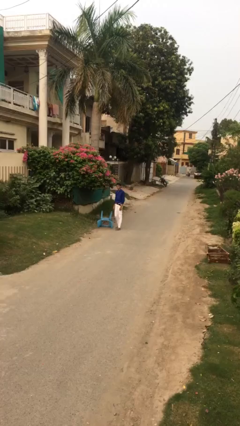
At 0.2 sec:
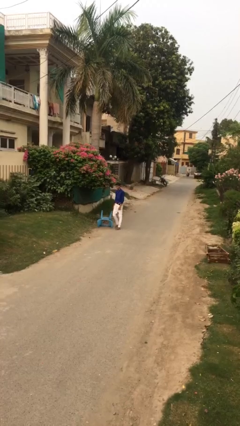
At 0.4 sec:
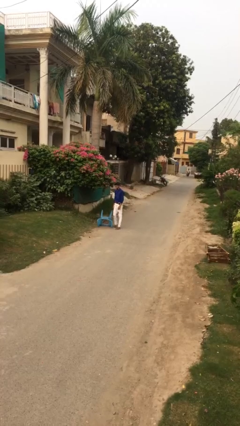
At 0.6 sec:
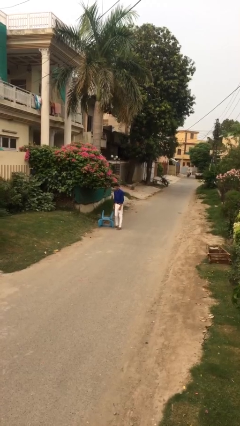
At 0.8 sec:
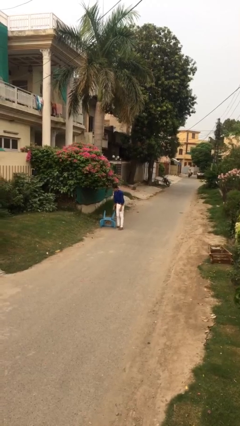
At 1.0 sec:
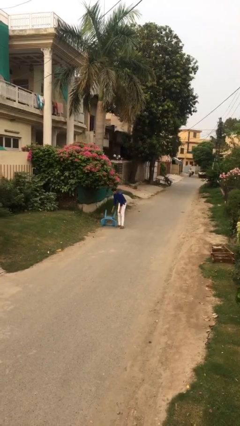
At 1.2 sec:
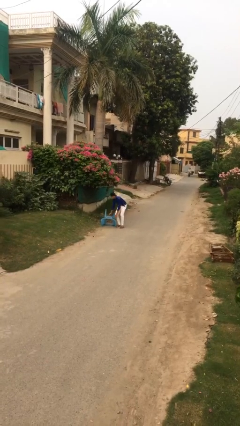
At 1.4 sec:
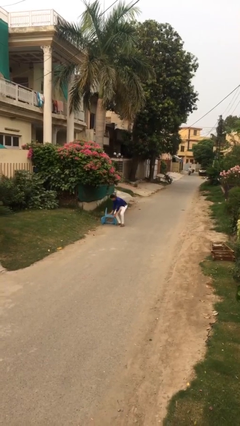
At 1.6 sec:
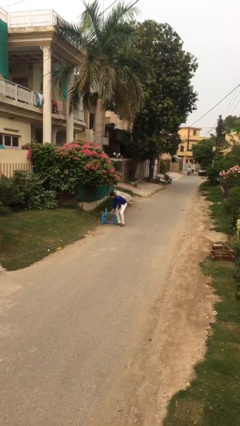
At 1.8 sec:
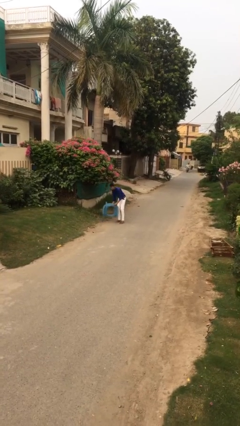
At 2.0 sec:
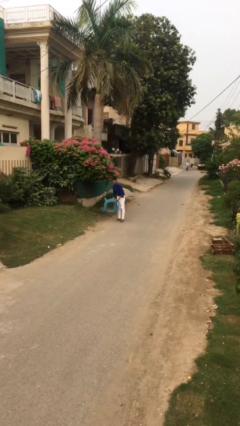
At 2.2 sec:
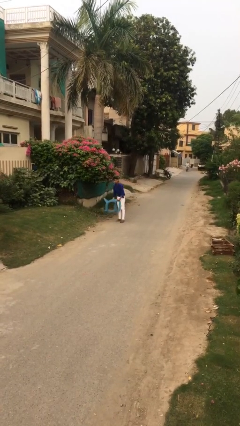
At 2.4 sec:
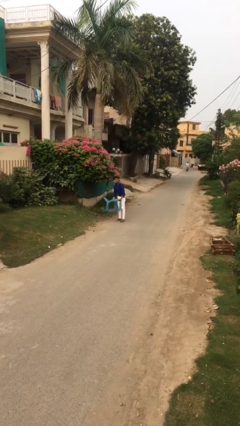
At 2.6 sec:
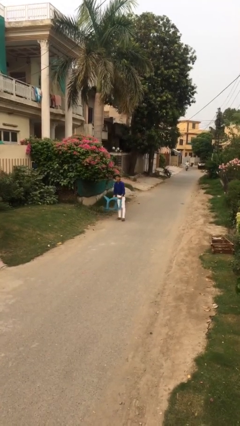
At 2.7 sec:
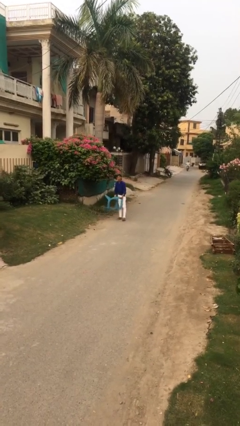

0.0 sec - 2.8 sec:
person picks up object from floor

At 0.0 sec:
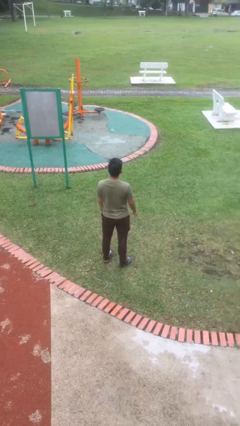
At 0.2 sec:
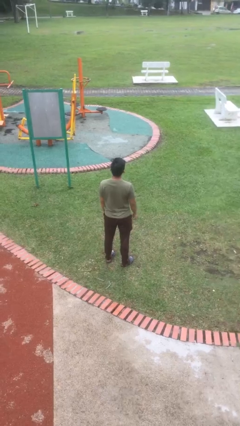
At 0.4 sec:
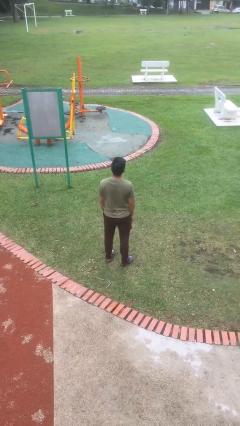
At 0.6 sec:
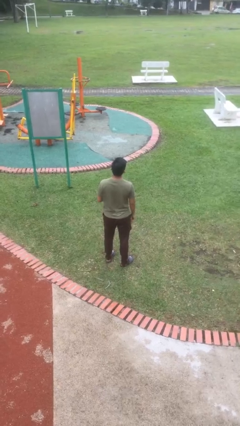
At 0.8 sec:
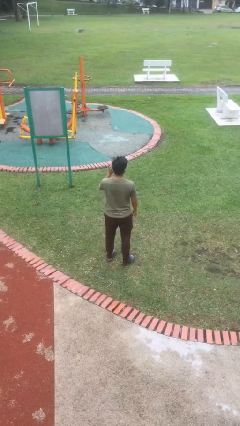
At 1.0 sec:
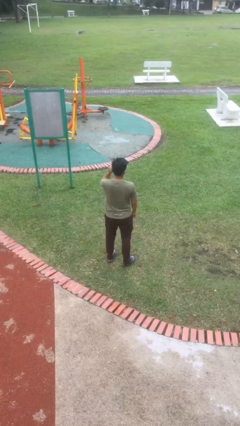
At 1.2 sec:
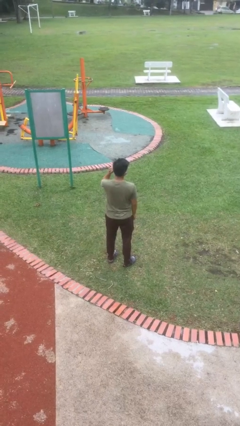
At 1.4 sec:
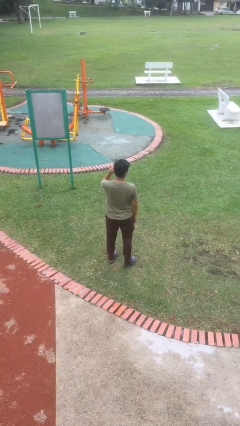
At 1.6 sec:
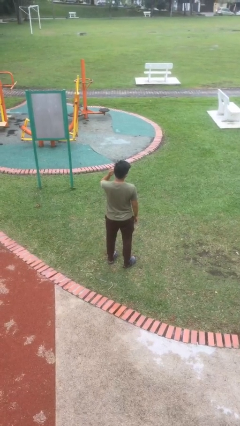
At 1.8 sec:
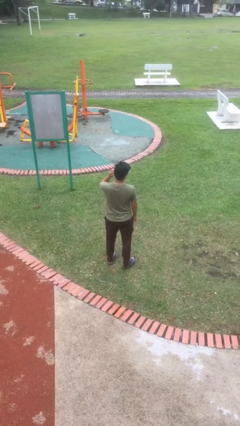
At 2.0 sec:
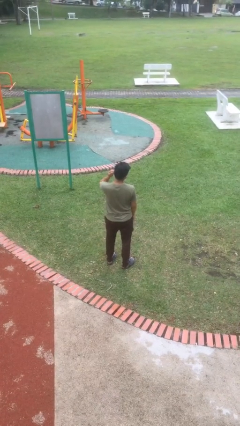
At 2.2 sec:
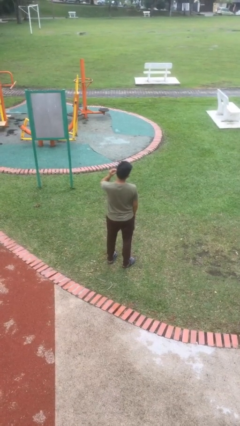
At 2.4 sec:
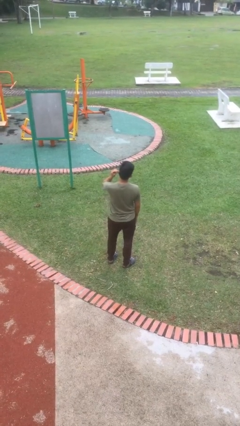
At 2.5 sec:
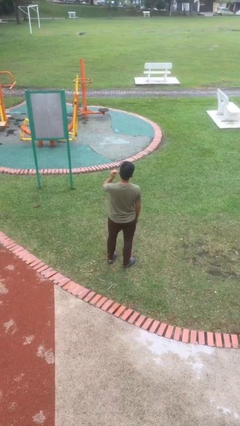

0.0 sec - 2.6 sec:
person touches earlobe

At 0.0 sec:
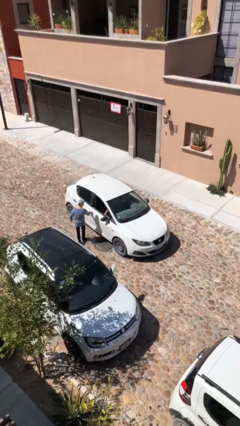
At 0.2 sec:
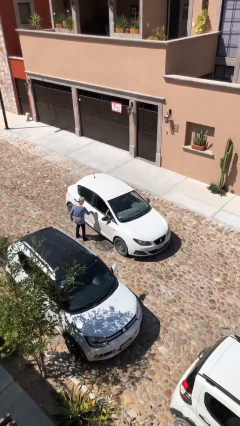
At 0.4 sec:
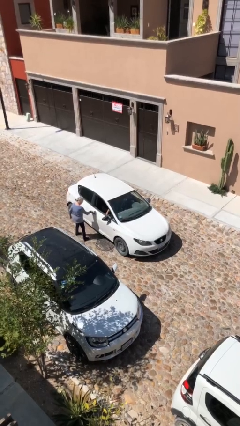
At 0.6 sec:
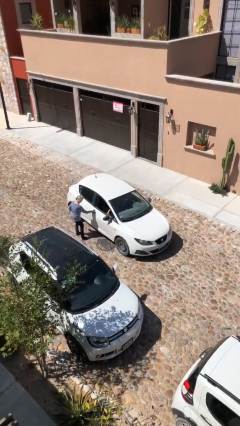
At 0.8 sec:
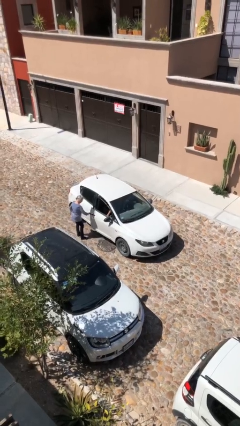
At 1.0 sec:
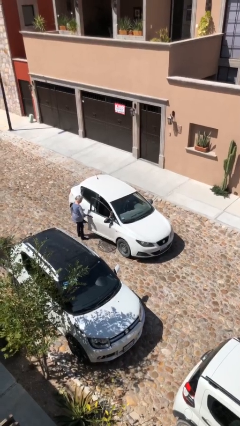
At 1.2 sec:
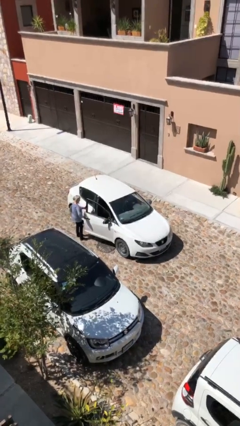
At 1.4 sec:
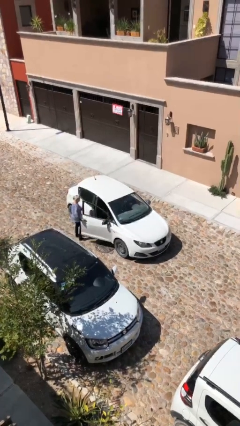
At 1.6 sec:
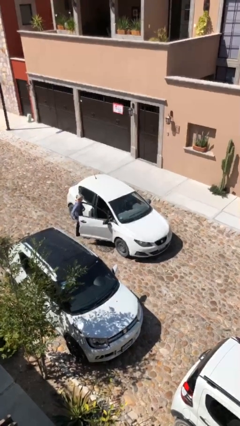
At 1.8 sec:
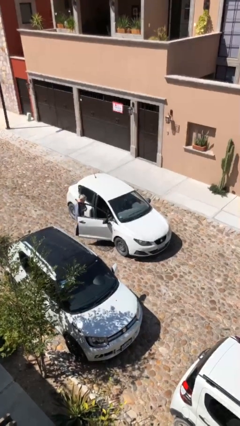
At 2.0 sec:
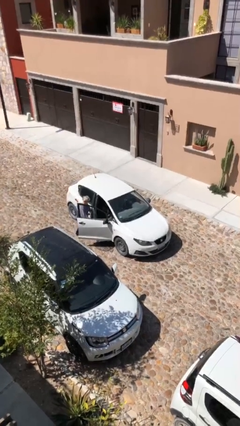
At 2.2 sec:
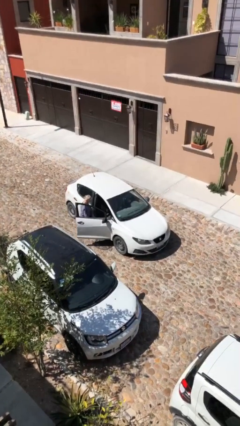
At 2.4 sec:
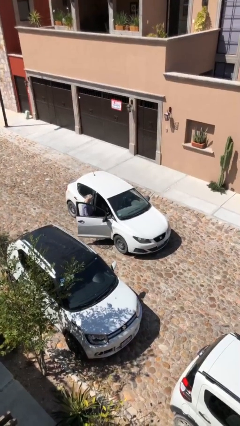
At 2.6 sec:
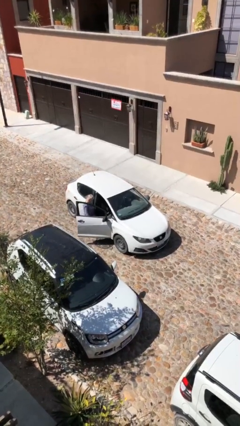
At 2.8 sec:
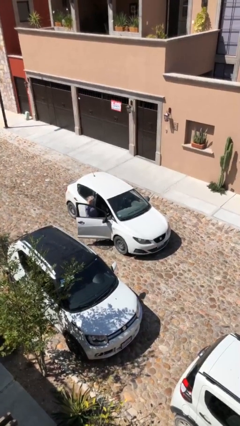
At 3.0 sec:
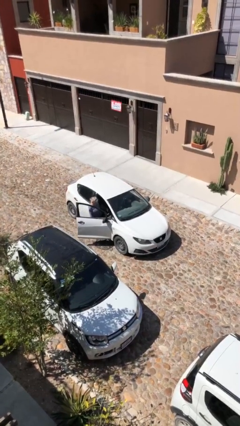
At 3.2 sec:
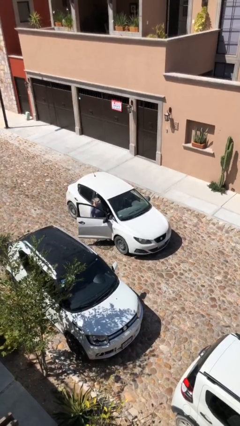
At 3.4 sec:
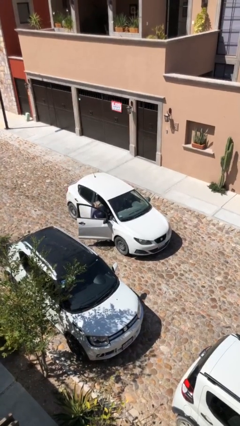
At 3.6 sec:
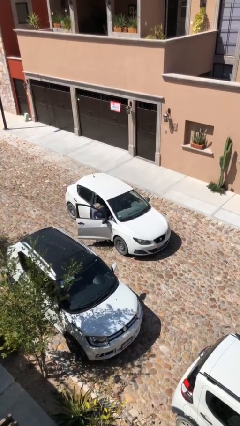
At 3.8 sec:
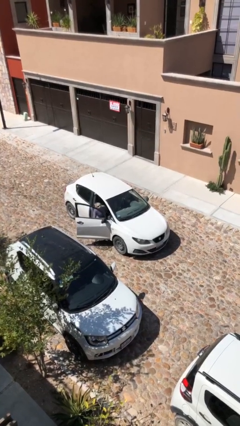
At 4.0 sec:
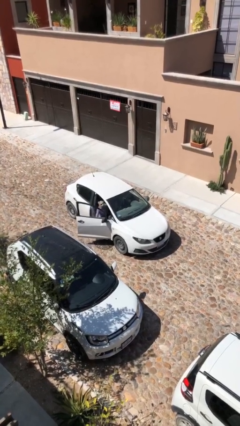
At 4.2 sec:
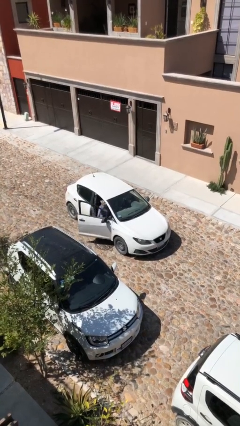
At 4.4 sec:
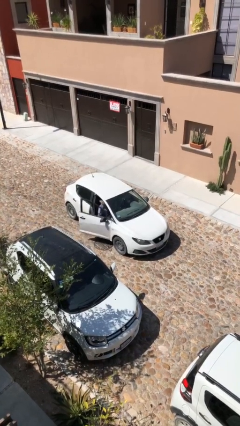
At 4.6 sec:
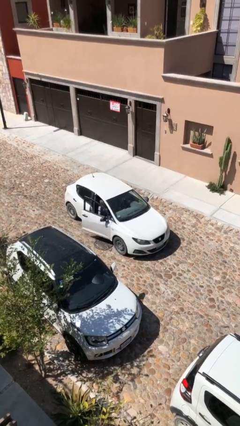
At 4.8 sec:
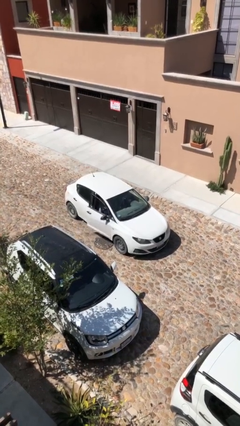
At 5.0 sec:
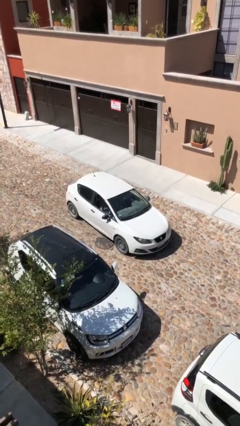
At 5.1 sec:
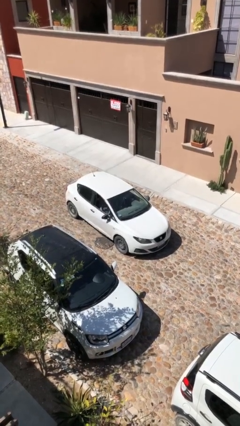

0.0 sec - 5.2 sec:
car picks up person

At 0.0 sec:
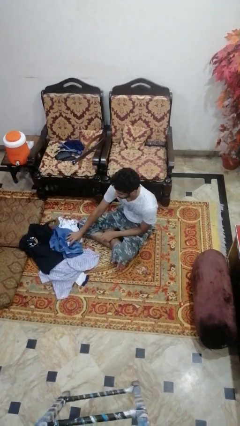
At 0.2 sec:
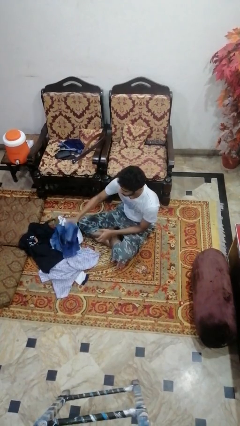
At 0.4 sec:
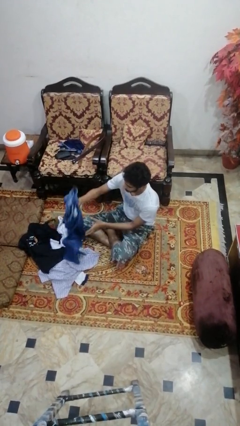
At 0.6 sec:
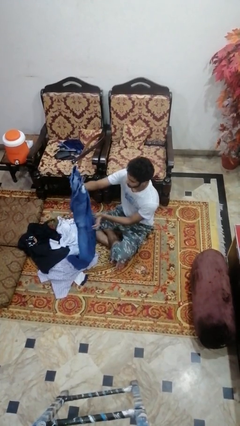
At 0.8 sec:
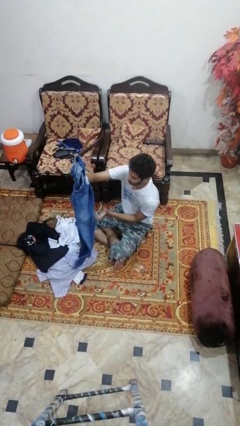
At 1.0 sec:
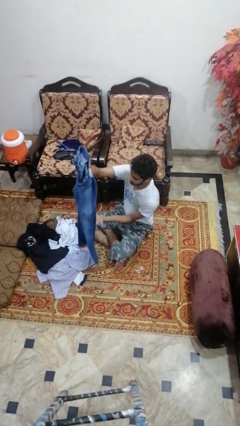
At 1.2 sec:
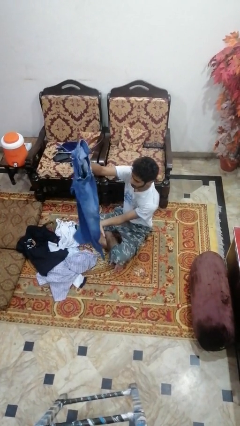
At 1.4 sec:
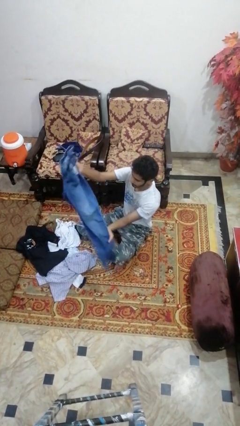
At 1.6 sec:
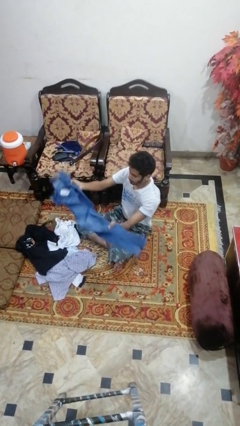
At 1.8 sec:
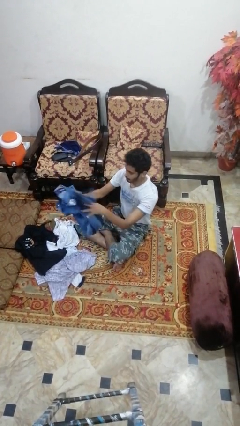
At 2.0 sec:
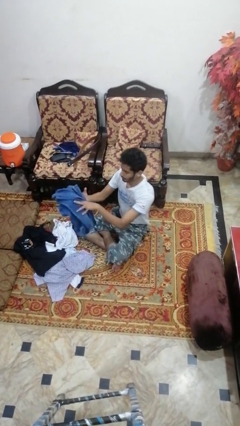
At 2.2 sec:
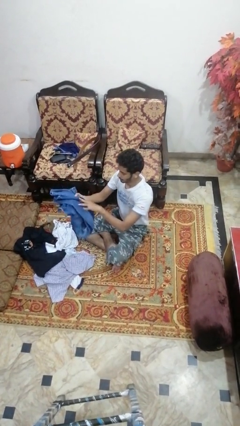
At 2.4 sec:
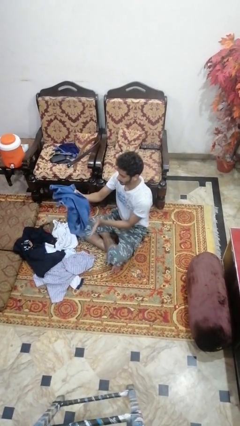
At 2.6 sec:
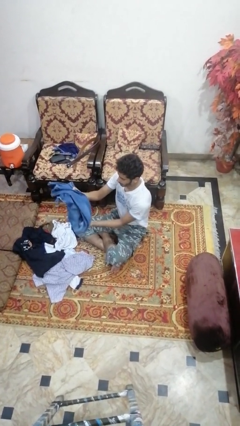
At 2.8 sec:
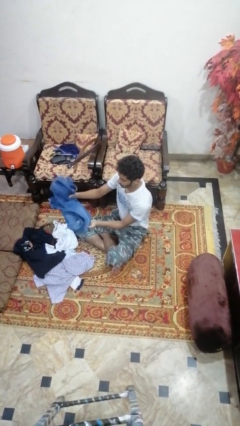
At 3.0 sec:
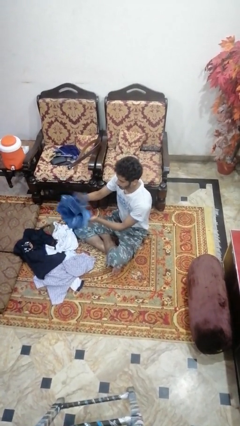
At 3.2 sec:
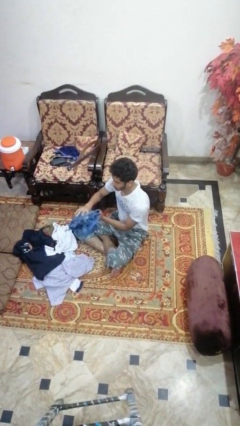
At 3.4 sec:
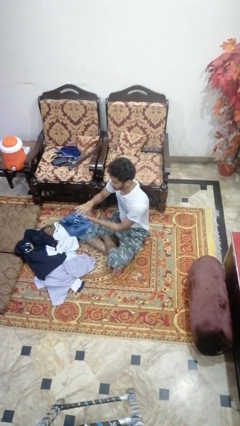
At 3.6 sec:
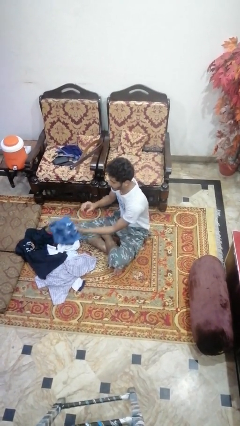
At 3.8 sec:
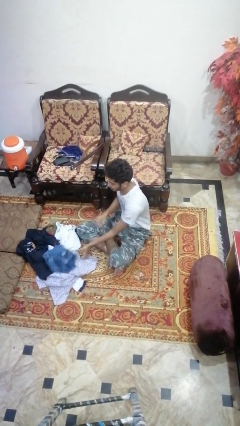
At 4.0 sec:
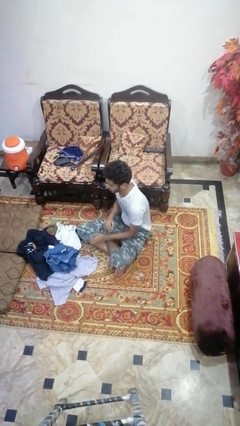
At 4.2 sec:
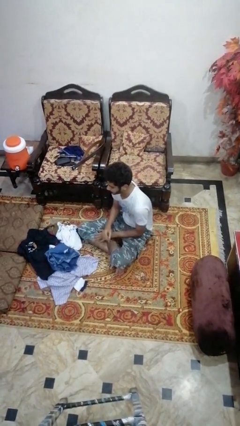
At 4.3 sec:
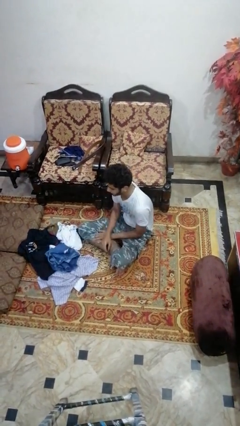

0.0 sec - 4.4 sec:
person folds pants

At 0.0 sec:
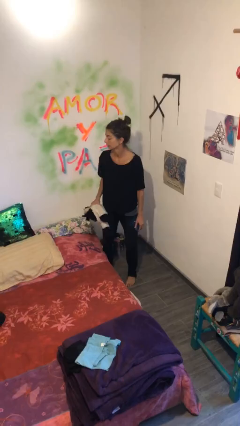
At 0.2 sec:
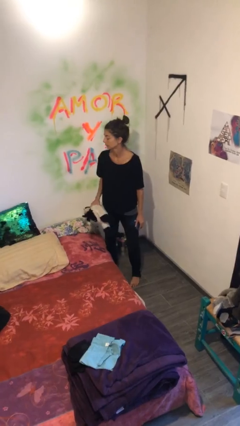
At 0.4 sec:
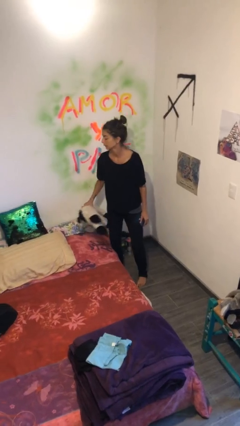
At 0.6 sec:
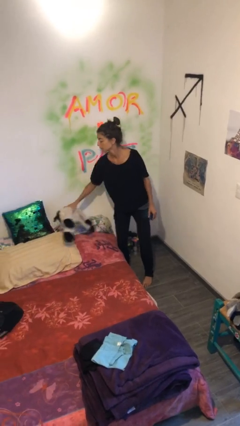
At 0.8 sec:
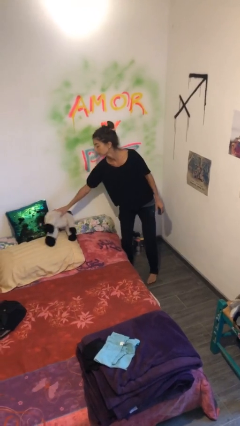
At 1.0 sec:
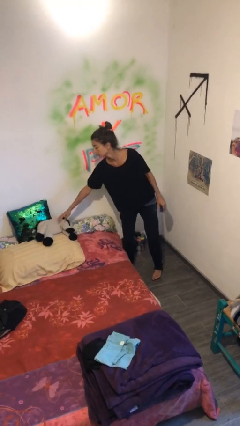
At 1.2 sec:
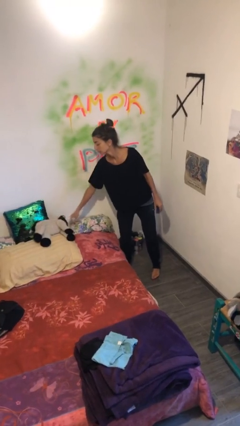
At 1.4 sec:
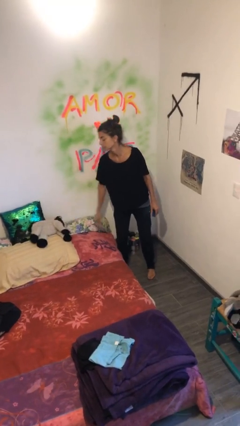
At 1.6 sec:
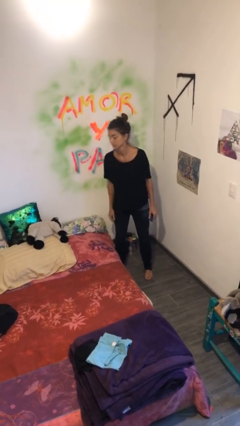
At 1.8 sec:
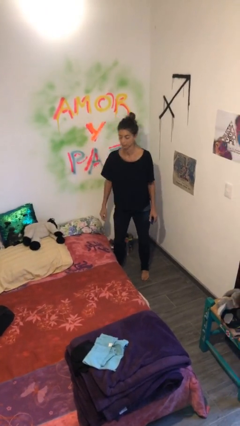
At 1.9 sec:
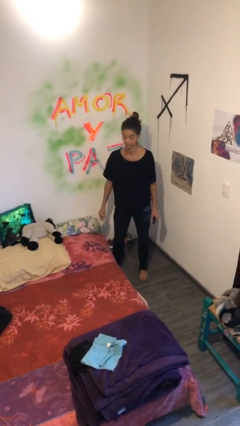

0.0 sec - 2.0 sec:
person puts down object on bed

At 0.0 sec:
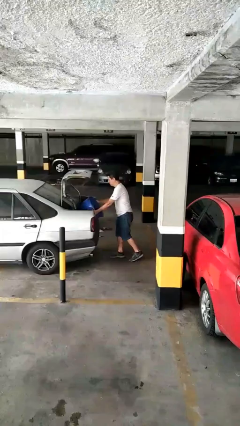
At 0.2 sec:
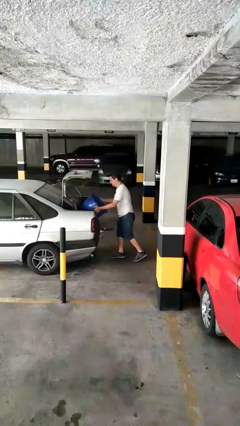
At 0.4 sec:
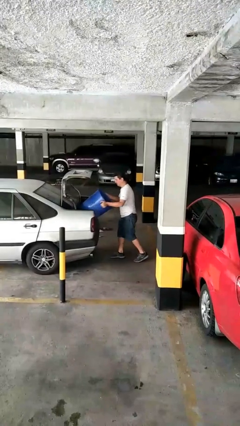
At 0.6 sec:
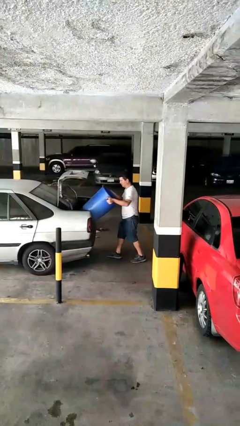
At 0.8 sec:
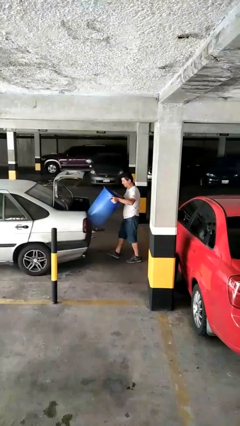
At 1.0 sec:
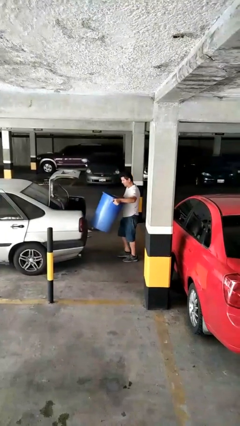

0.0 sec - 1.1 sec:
person unloads car
